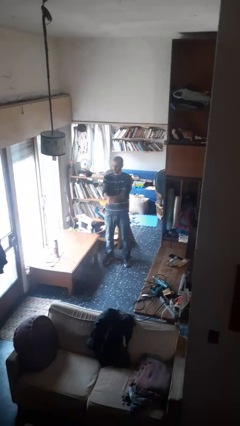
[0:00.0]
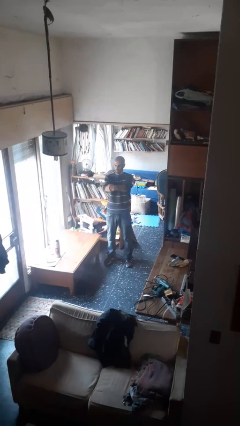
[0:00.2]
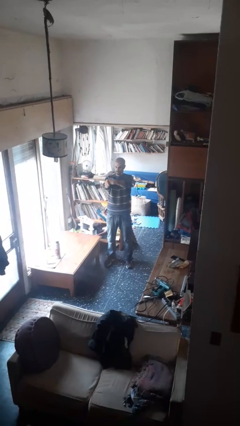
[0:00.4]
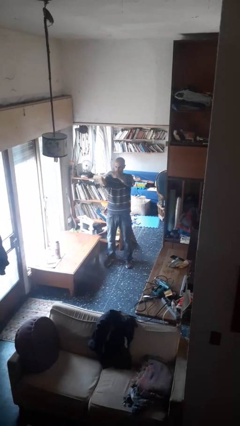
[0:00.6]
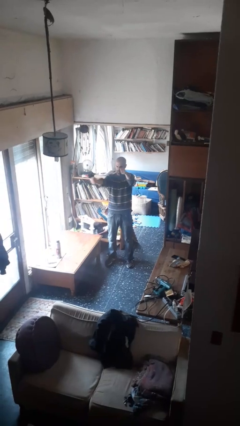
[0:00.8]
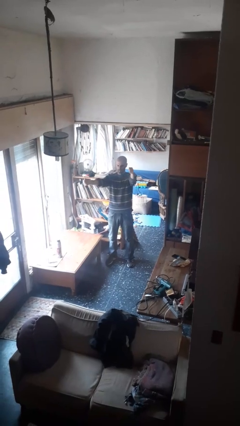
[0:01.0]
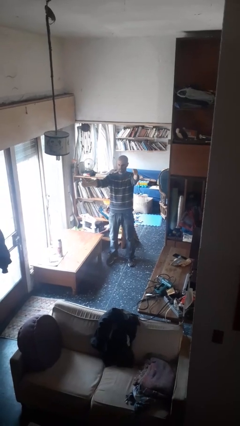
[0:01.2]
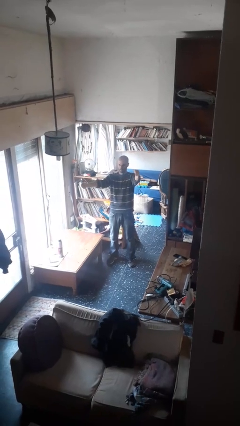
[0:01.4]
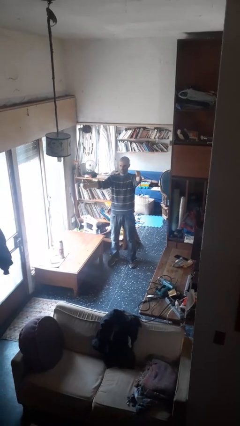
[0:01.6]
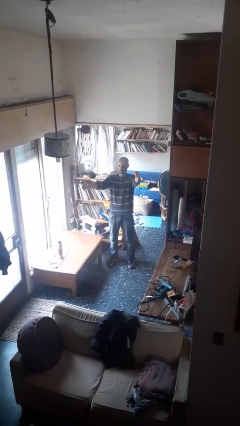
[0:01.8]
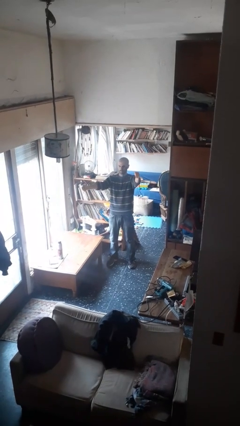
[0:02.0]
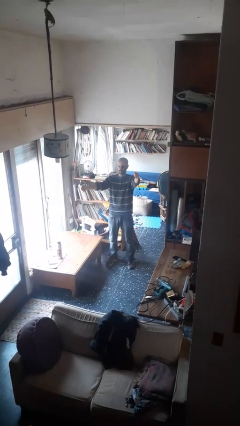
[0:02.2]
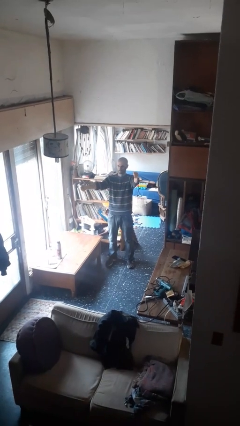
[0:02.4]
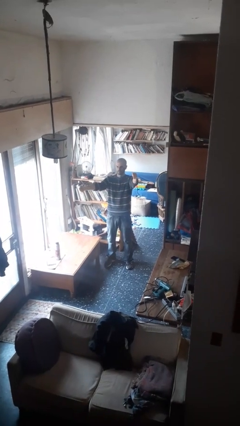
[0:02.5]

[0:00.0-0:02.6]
person gestures zoom in

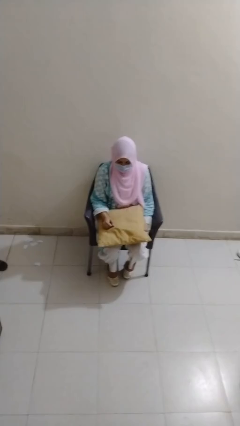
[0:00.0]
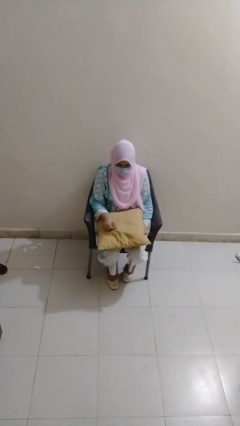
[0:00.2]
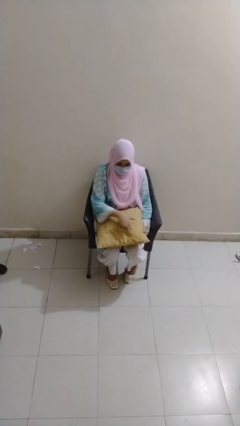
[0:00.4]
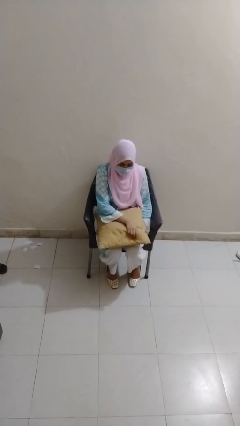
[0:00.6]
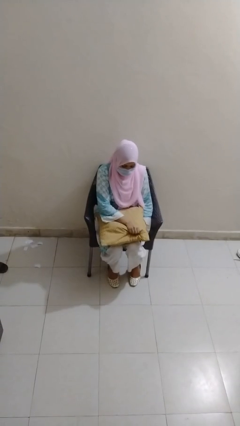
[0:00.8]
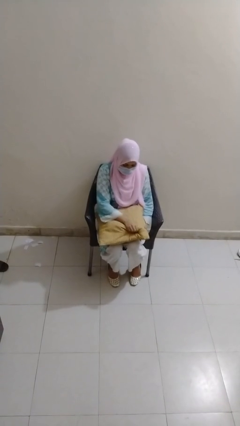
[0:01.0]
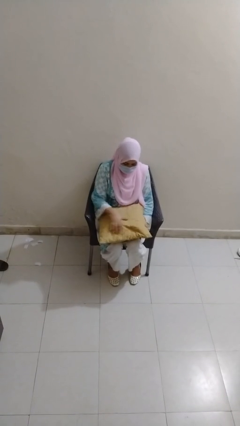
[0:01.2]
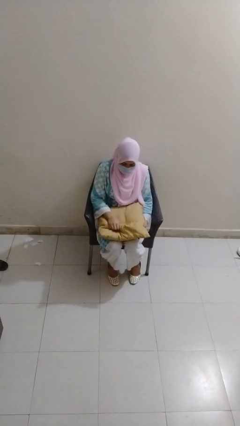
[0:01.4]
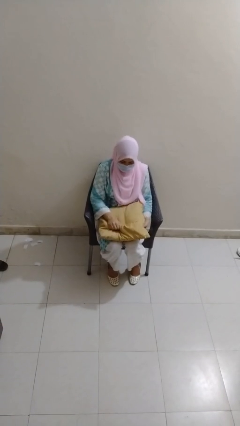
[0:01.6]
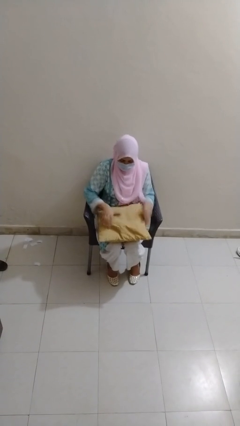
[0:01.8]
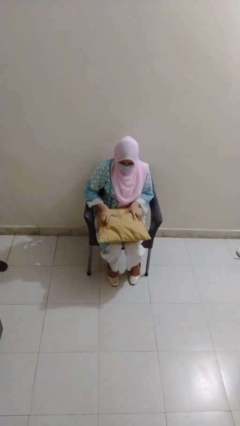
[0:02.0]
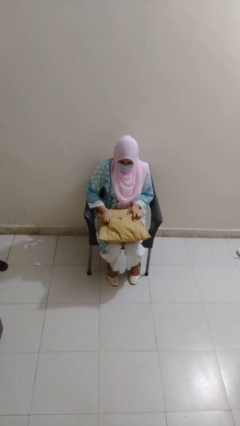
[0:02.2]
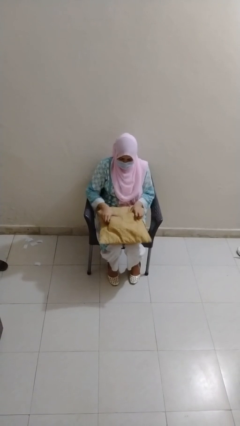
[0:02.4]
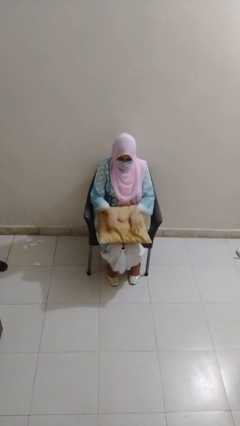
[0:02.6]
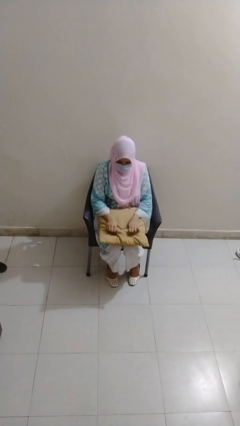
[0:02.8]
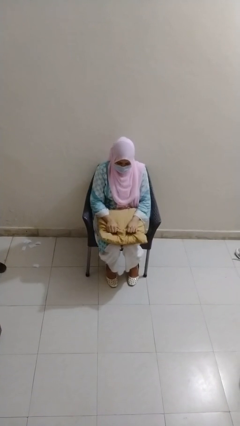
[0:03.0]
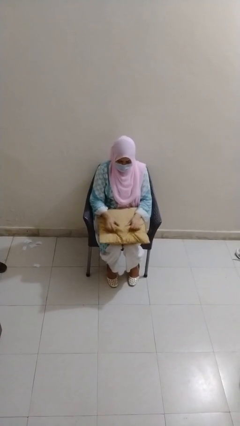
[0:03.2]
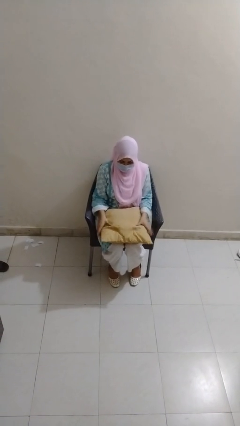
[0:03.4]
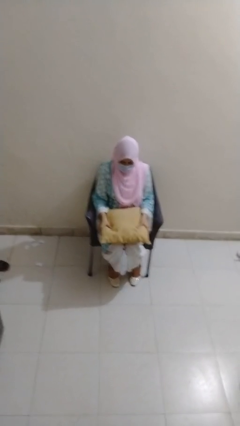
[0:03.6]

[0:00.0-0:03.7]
person squeezes object

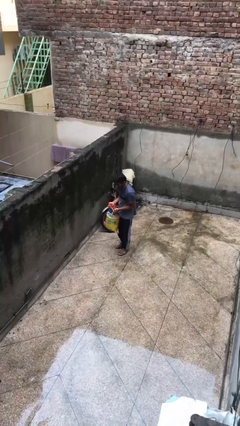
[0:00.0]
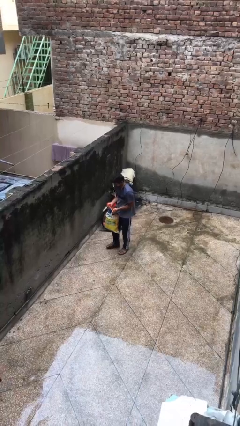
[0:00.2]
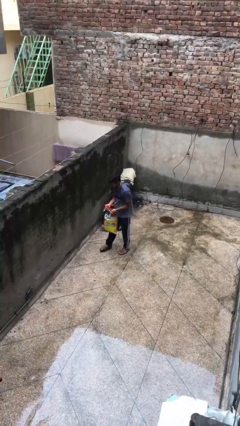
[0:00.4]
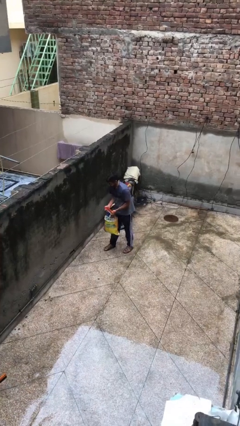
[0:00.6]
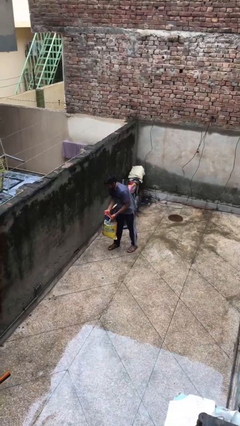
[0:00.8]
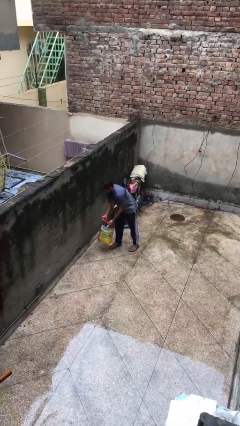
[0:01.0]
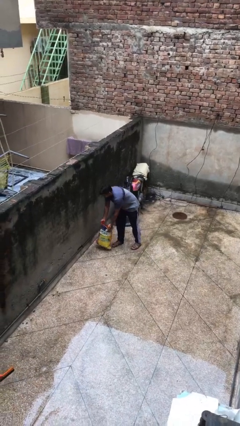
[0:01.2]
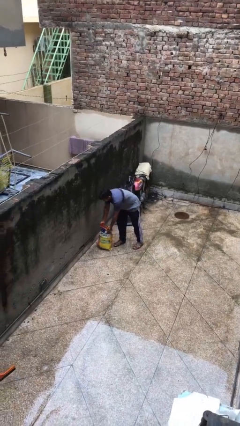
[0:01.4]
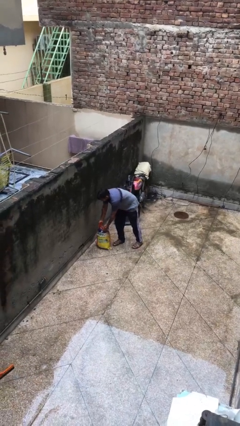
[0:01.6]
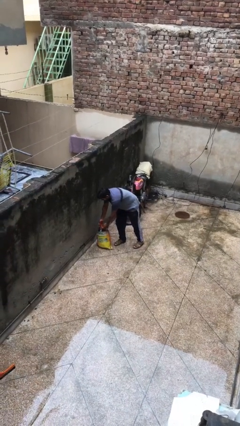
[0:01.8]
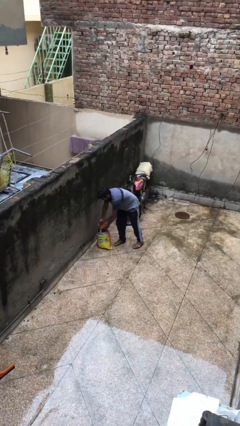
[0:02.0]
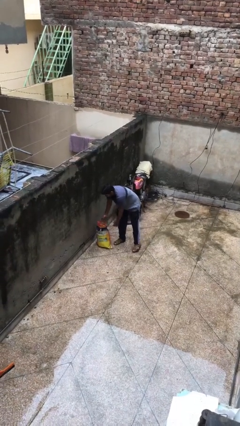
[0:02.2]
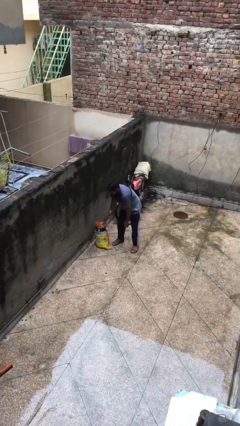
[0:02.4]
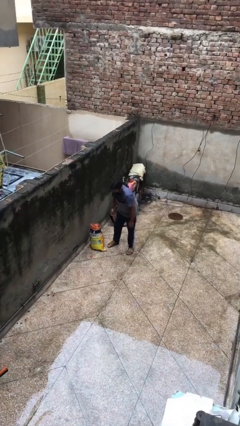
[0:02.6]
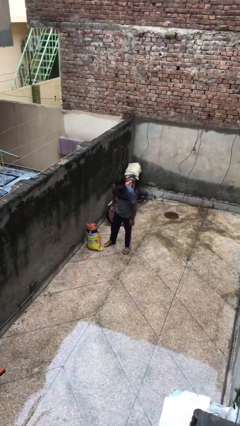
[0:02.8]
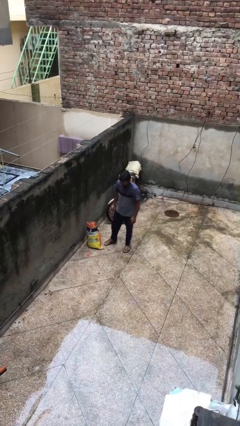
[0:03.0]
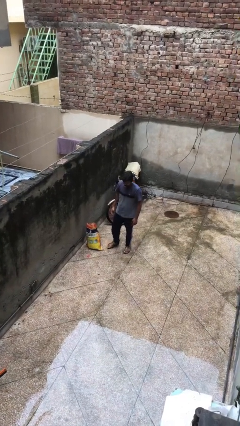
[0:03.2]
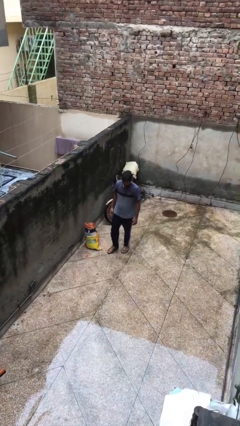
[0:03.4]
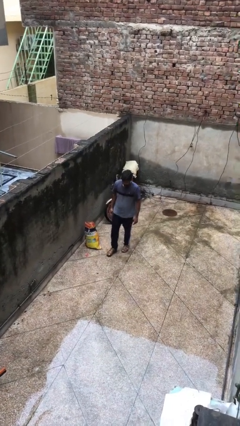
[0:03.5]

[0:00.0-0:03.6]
person puts down object on floor

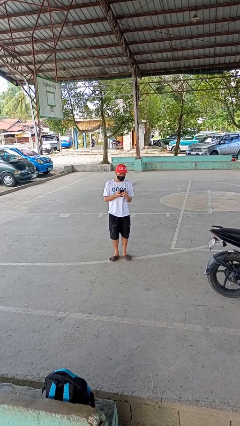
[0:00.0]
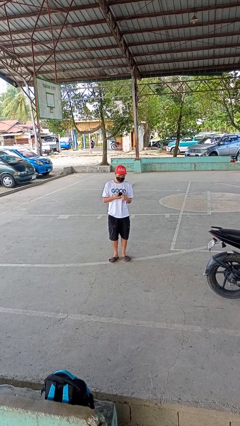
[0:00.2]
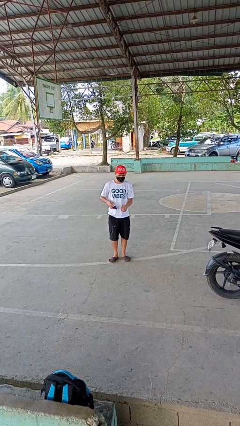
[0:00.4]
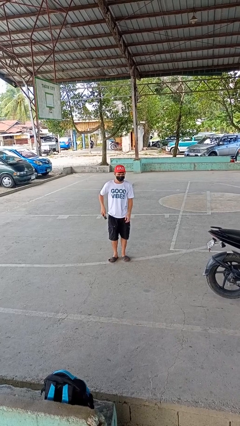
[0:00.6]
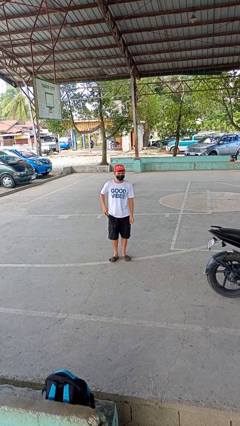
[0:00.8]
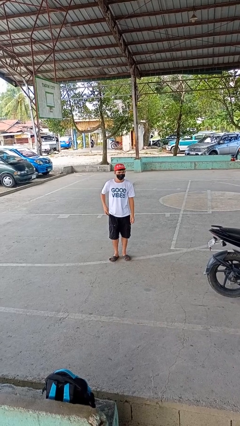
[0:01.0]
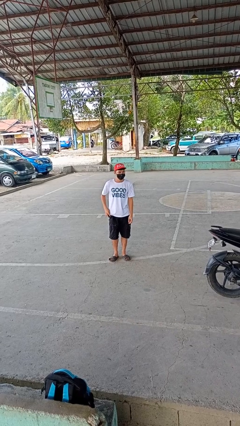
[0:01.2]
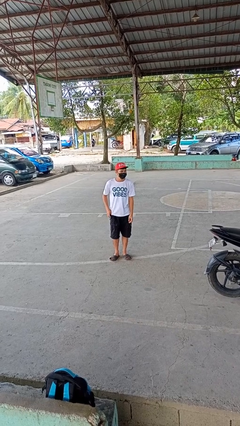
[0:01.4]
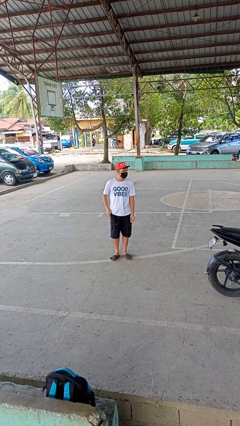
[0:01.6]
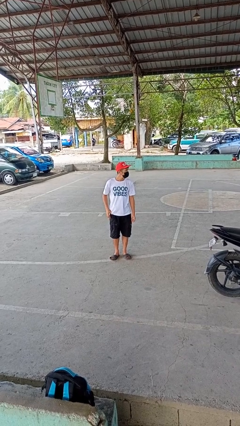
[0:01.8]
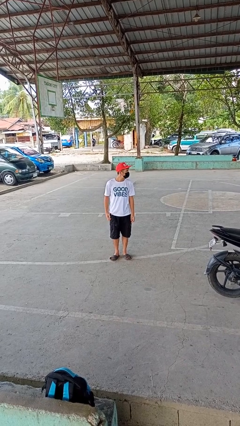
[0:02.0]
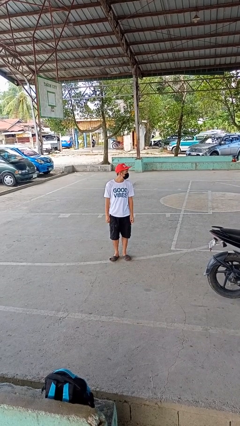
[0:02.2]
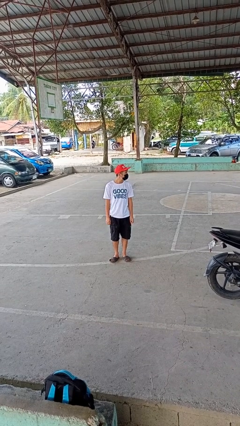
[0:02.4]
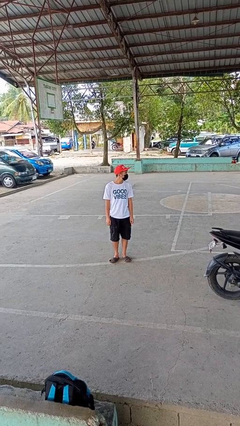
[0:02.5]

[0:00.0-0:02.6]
person puts phone into pocket

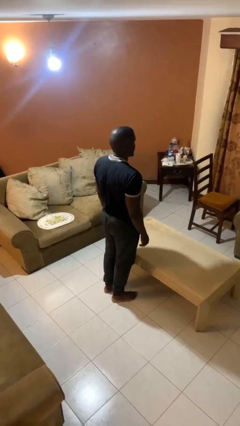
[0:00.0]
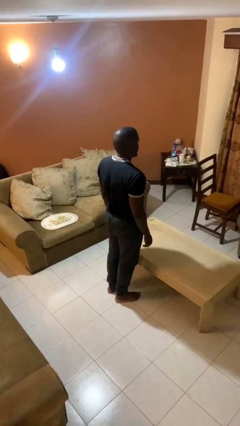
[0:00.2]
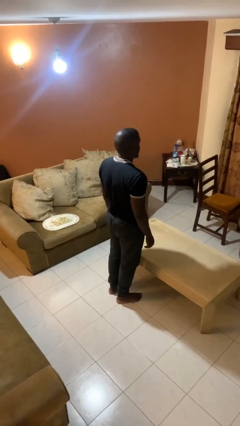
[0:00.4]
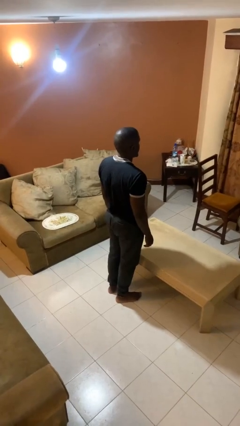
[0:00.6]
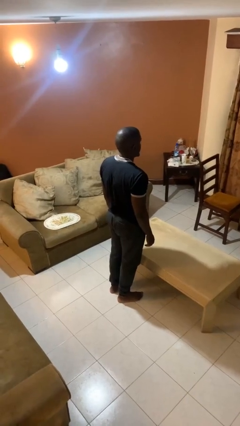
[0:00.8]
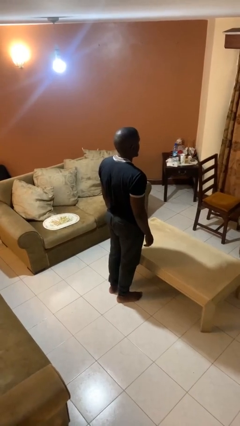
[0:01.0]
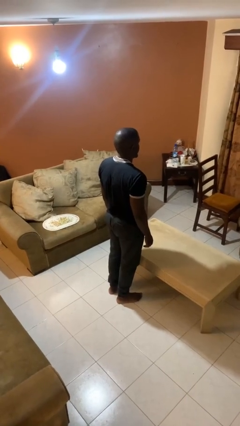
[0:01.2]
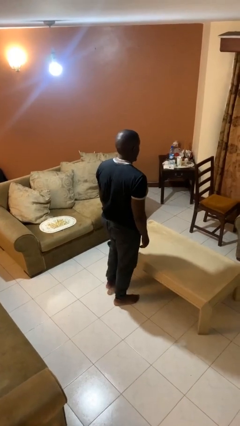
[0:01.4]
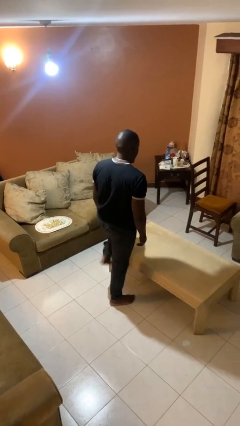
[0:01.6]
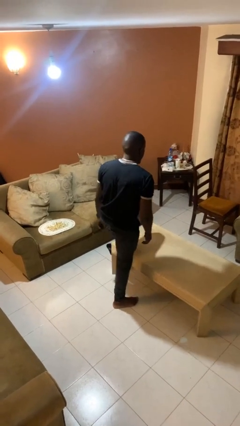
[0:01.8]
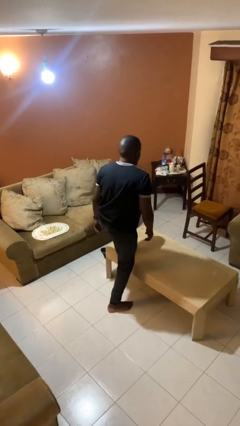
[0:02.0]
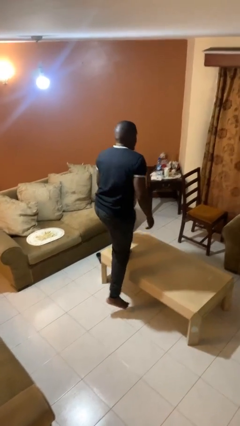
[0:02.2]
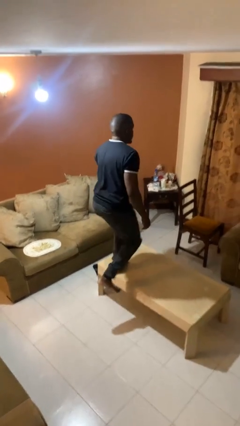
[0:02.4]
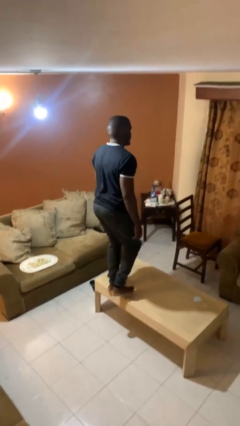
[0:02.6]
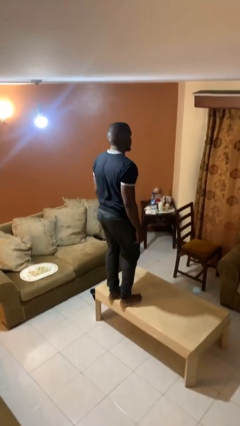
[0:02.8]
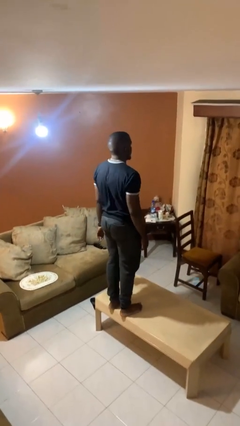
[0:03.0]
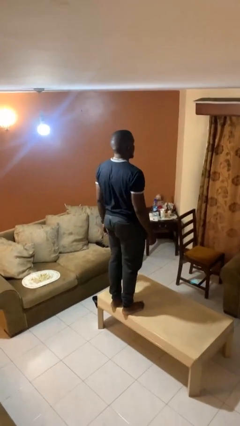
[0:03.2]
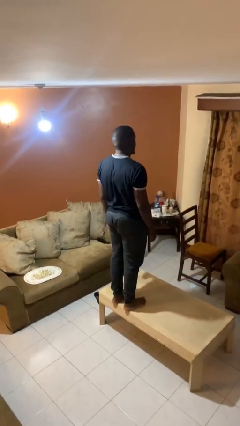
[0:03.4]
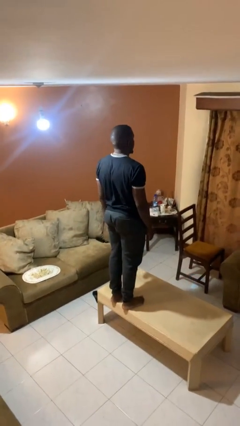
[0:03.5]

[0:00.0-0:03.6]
person climbs on table

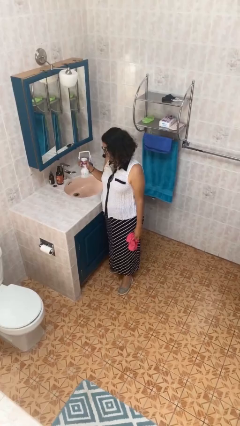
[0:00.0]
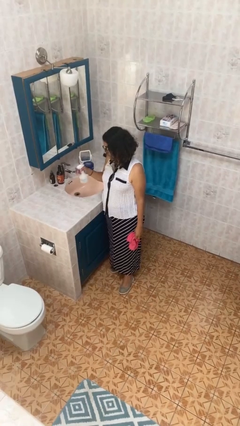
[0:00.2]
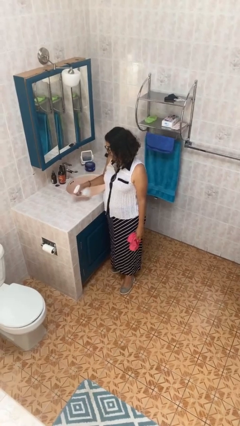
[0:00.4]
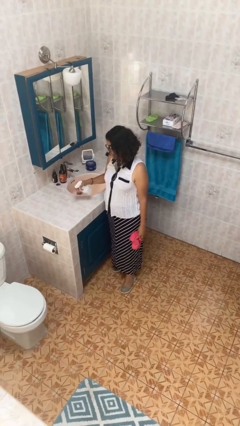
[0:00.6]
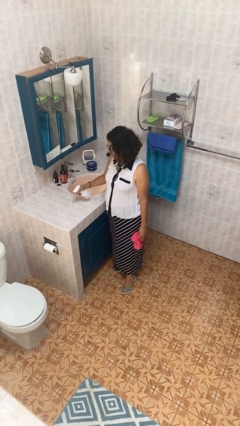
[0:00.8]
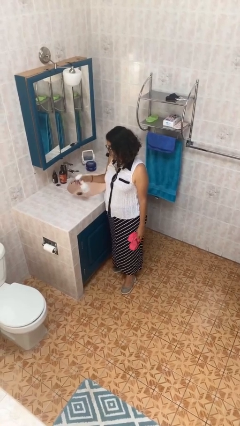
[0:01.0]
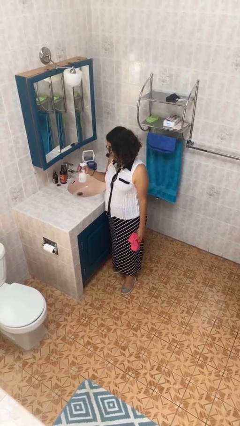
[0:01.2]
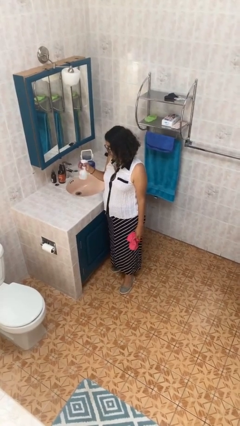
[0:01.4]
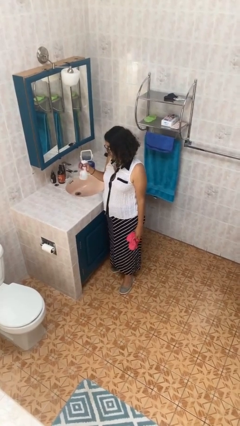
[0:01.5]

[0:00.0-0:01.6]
person sprays from bottle
